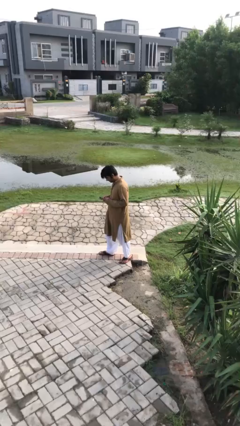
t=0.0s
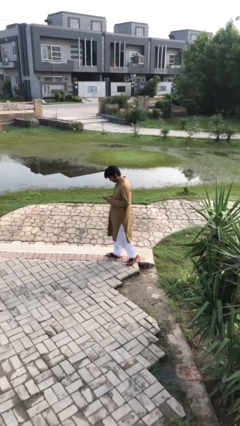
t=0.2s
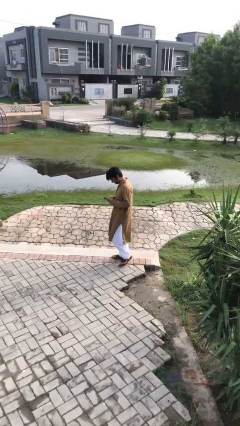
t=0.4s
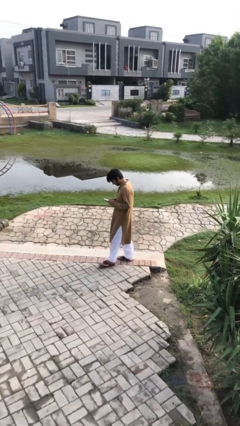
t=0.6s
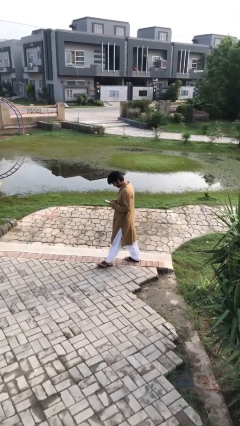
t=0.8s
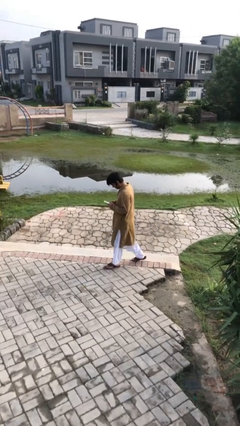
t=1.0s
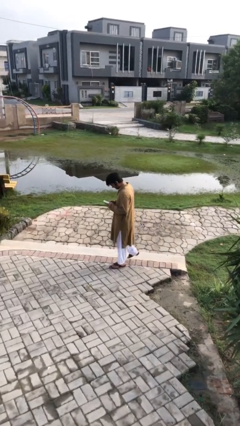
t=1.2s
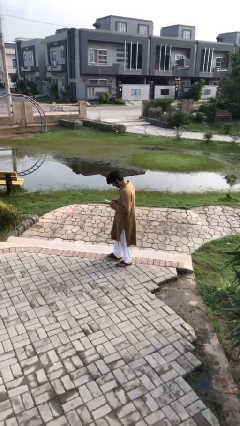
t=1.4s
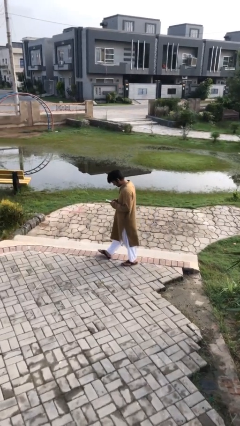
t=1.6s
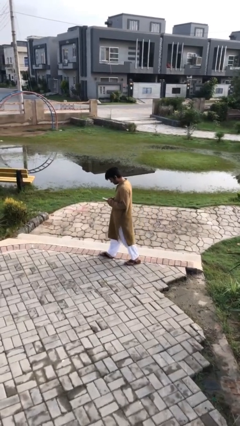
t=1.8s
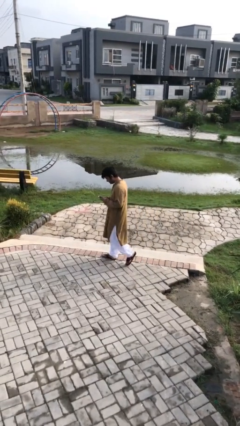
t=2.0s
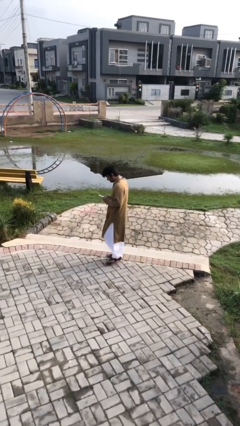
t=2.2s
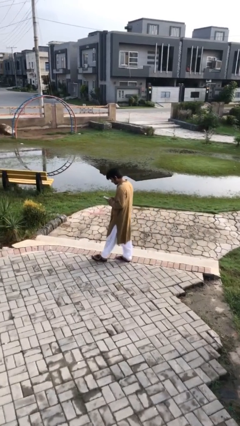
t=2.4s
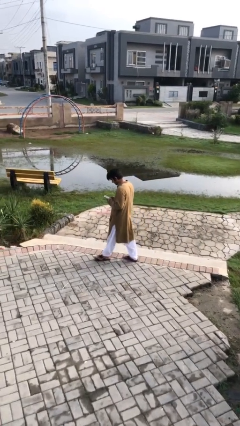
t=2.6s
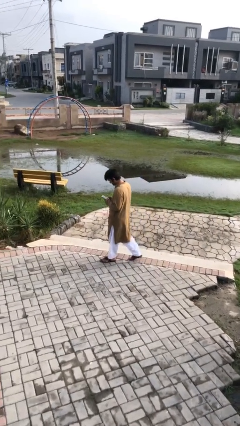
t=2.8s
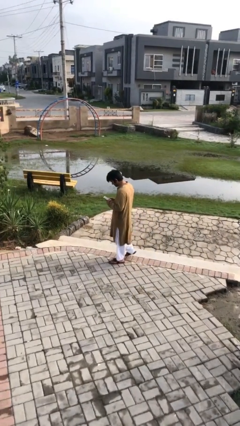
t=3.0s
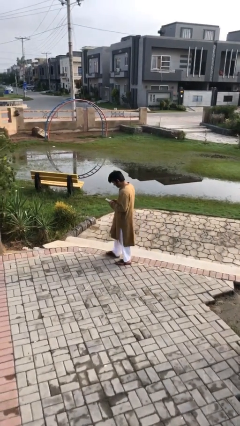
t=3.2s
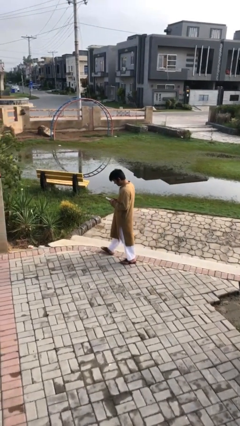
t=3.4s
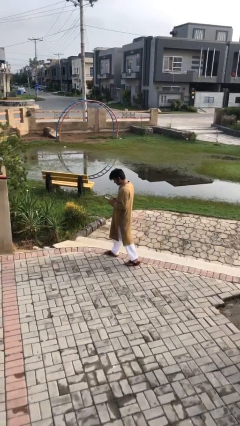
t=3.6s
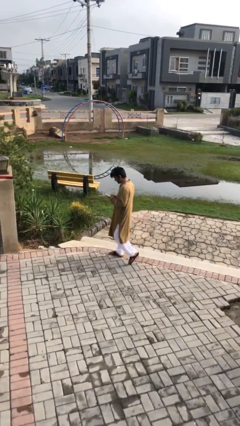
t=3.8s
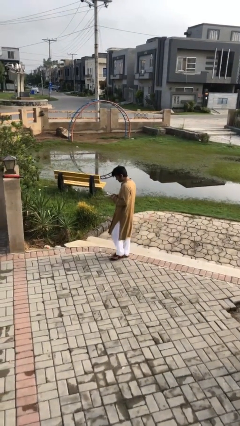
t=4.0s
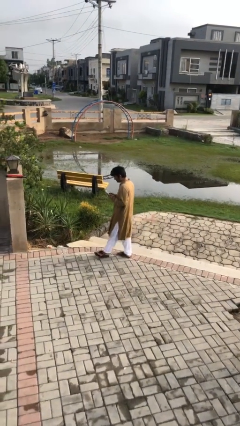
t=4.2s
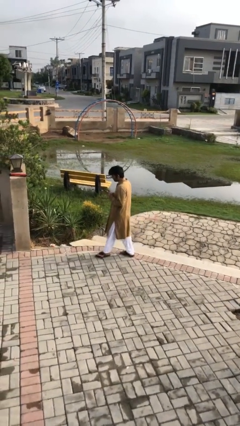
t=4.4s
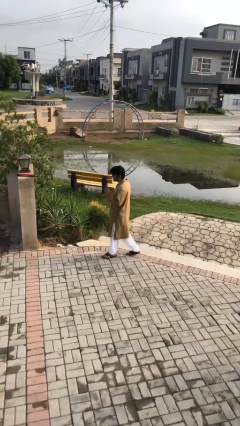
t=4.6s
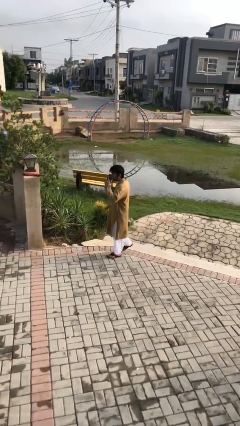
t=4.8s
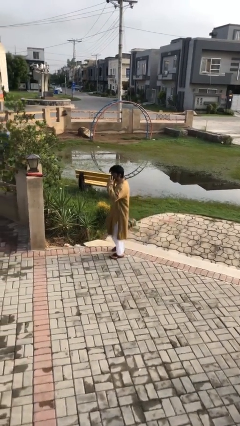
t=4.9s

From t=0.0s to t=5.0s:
person texts on phone

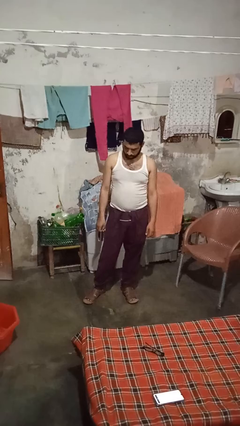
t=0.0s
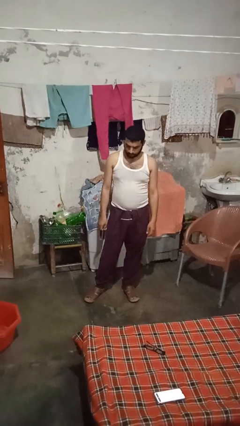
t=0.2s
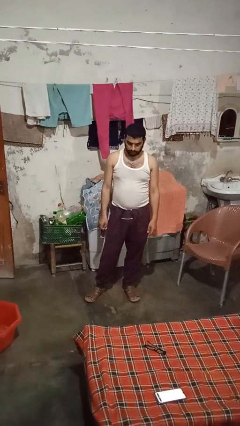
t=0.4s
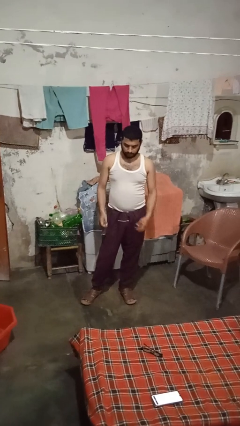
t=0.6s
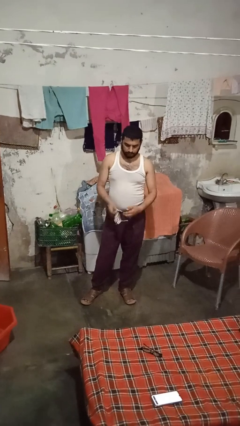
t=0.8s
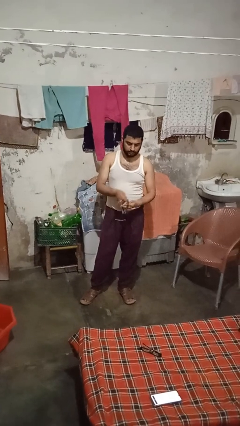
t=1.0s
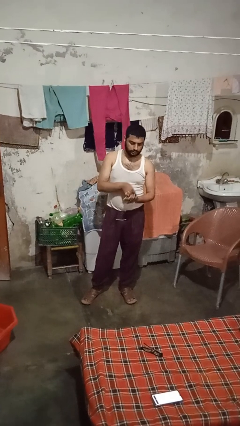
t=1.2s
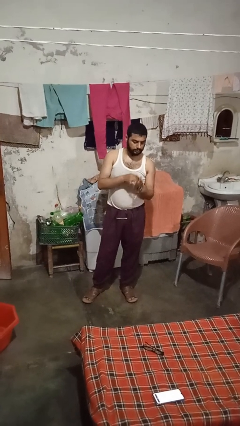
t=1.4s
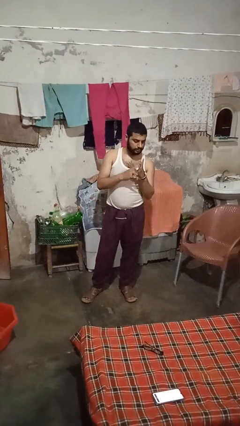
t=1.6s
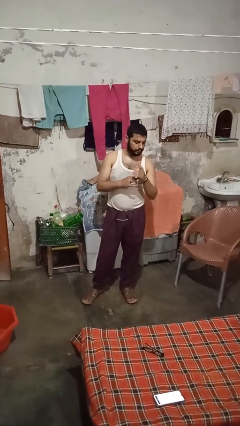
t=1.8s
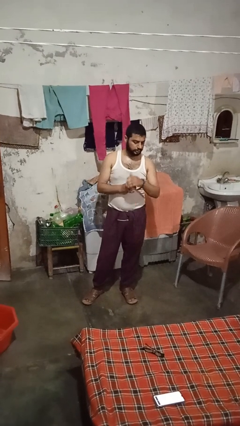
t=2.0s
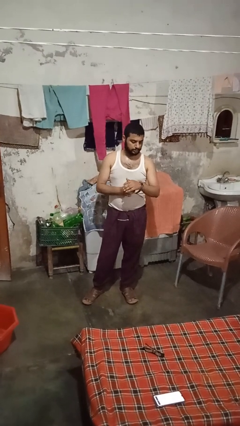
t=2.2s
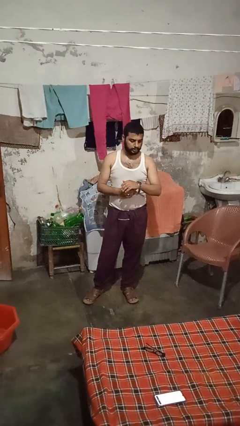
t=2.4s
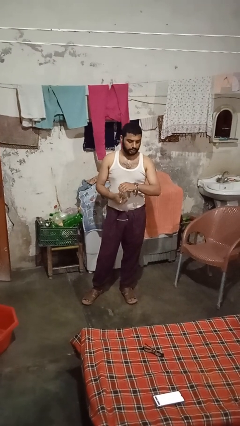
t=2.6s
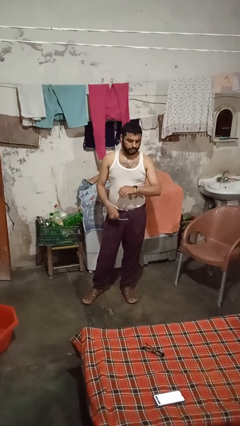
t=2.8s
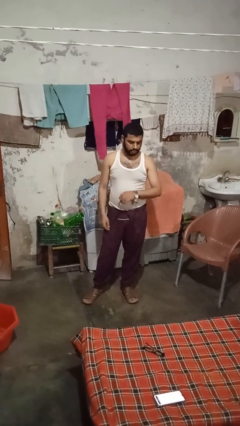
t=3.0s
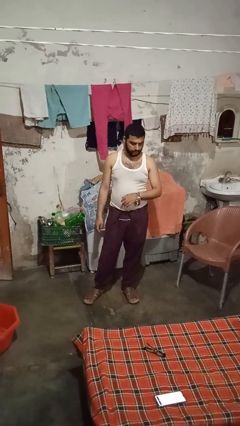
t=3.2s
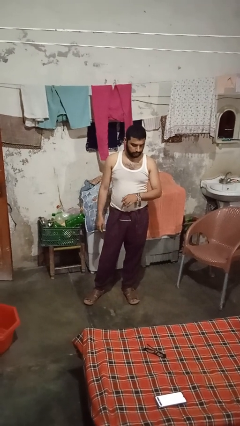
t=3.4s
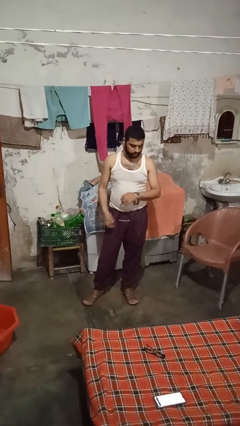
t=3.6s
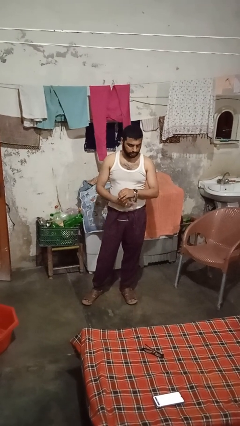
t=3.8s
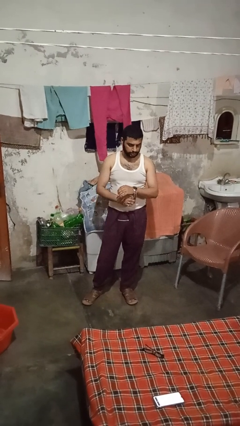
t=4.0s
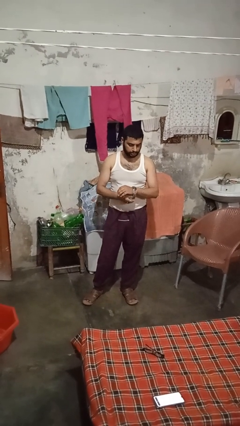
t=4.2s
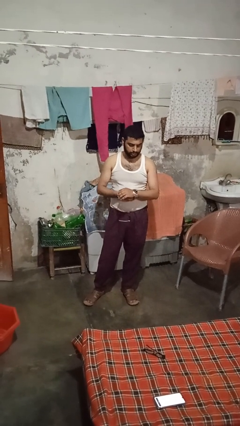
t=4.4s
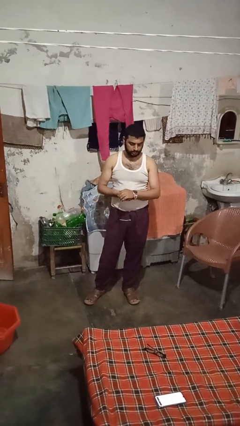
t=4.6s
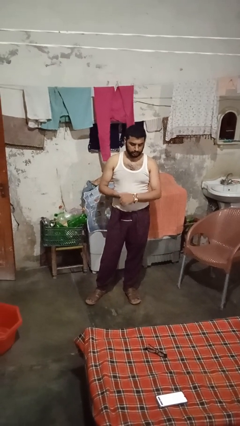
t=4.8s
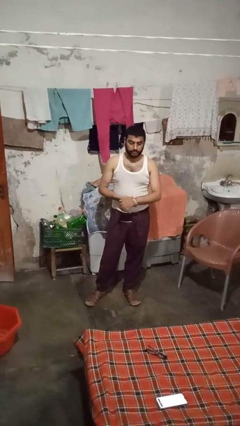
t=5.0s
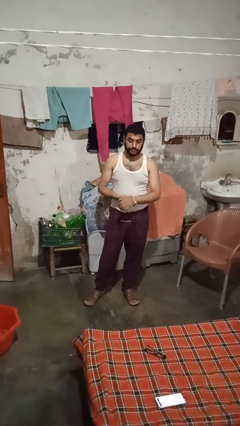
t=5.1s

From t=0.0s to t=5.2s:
person puts on wristwatch

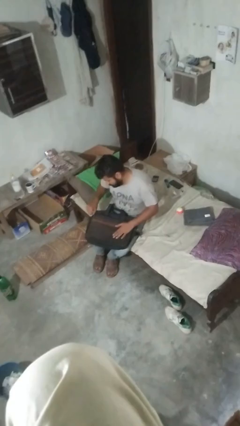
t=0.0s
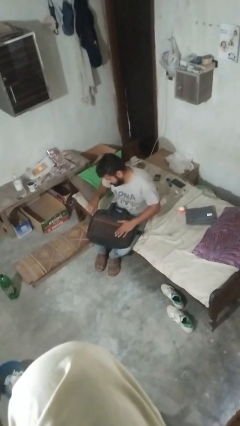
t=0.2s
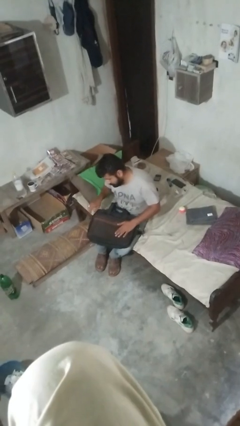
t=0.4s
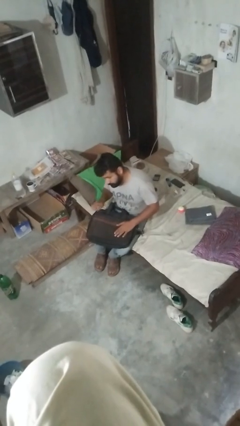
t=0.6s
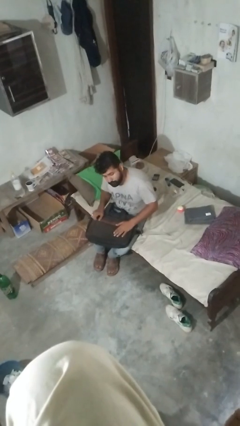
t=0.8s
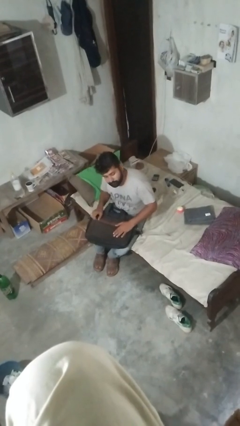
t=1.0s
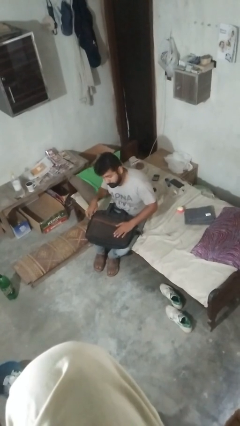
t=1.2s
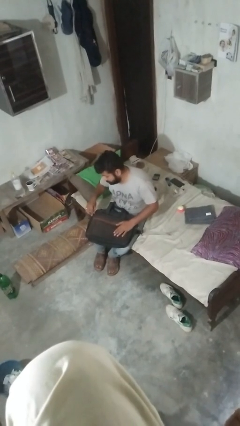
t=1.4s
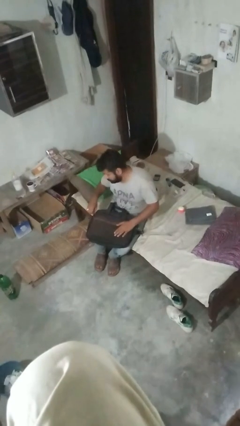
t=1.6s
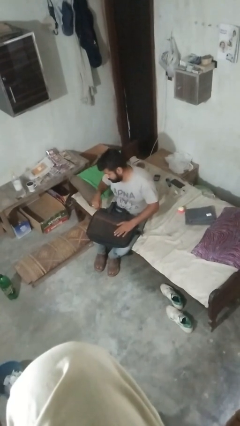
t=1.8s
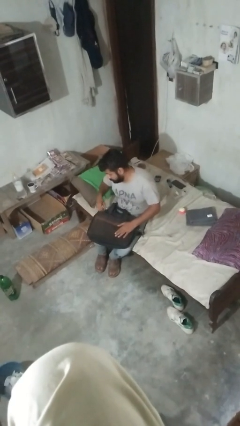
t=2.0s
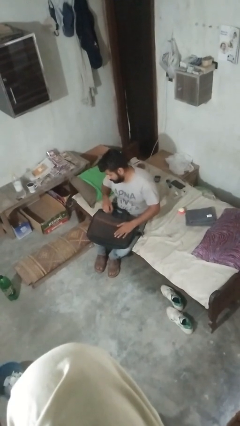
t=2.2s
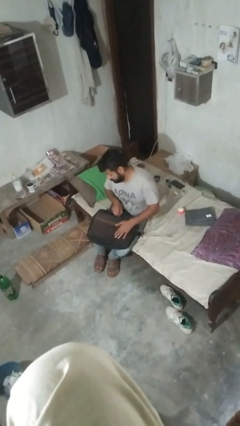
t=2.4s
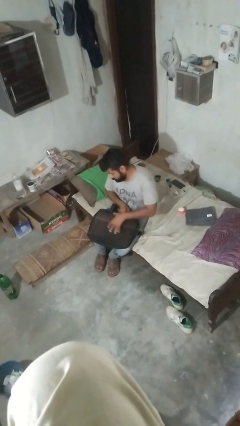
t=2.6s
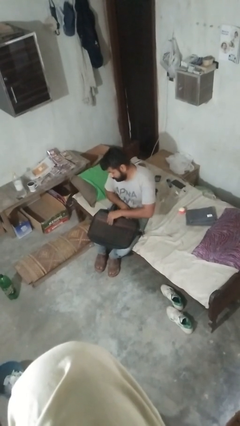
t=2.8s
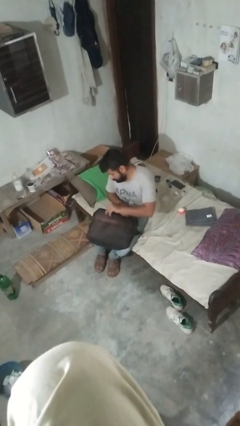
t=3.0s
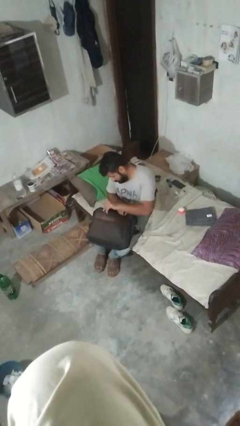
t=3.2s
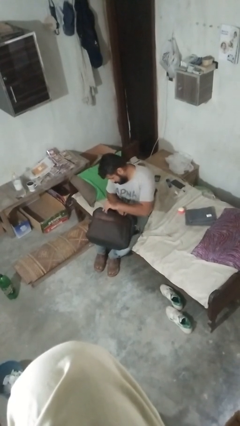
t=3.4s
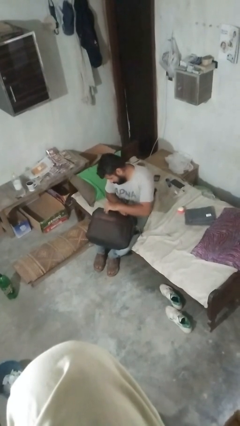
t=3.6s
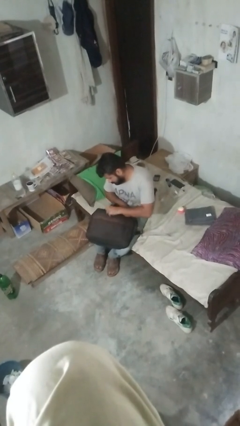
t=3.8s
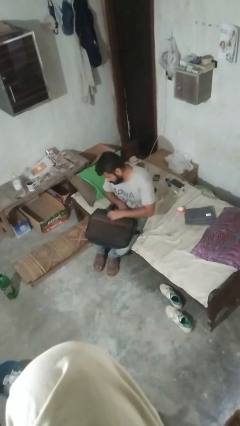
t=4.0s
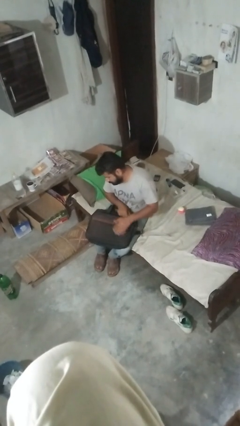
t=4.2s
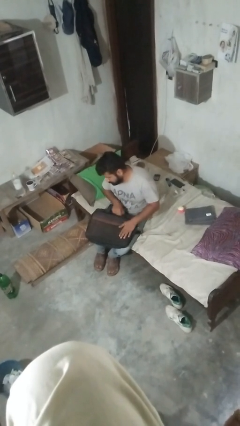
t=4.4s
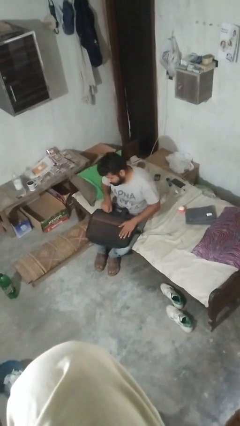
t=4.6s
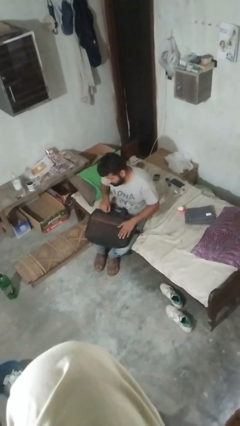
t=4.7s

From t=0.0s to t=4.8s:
person searches in bag

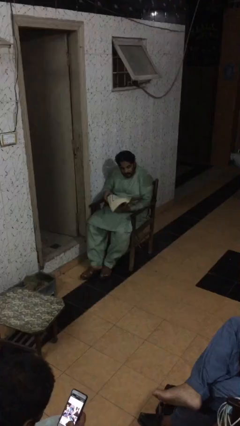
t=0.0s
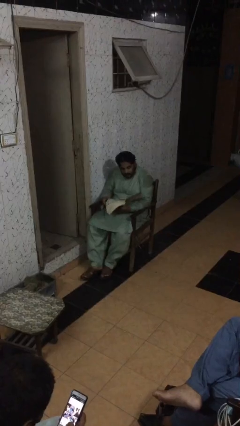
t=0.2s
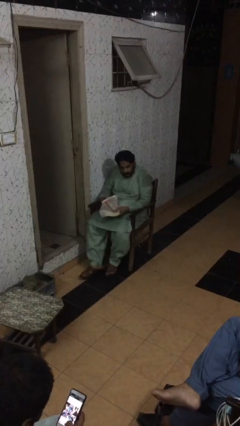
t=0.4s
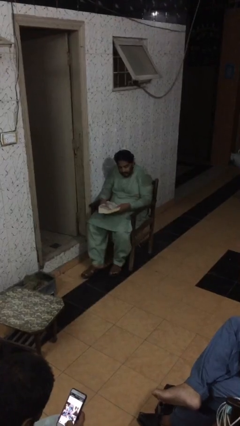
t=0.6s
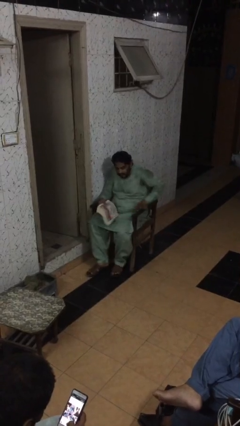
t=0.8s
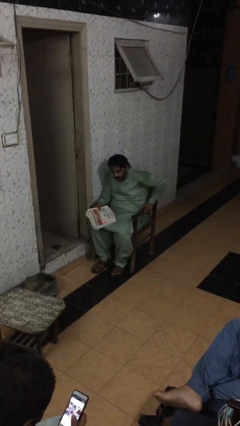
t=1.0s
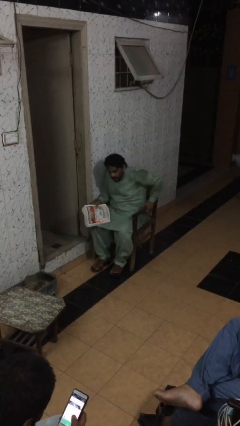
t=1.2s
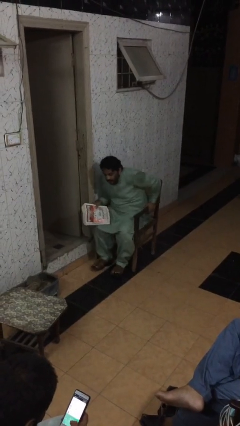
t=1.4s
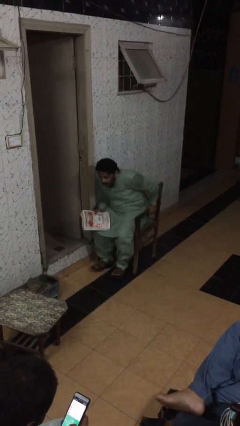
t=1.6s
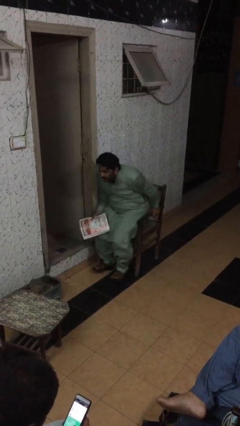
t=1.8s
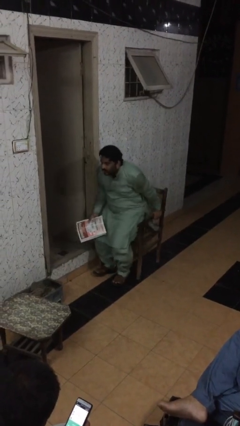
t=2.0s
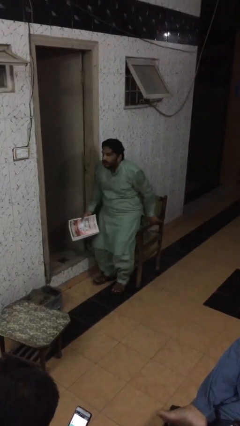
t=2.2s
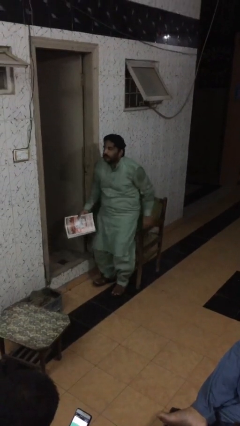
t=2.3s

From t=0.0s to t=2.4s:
person stands up

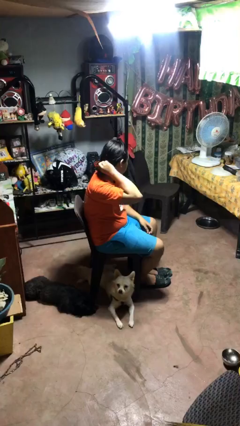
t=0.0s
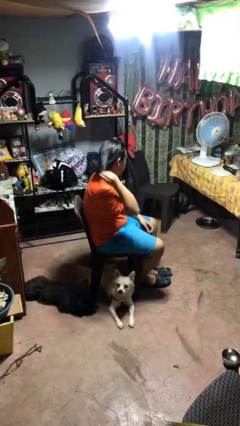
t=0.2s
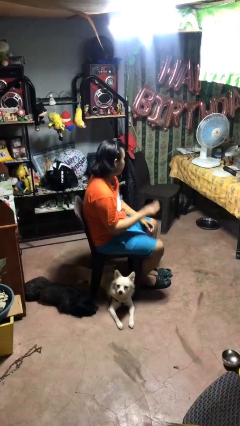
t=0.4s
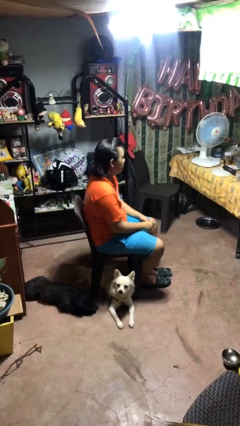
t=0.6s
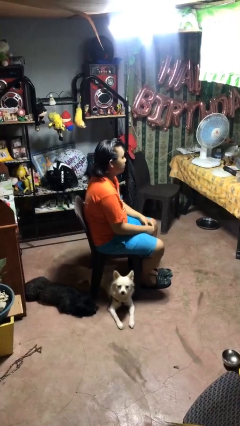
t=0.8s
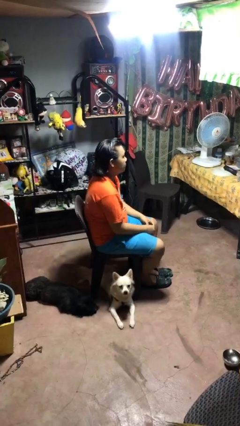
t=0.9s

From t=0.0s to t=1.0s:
person takes off hairtie
